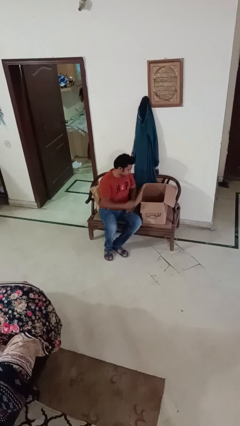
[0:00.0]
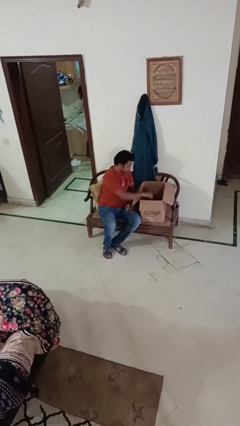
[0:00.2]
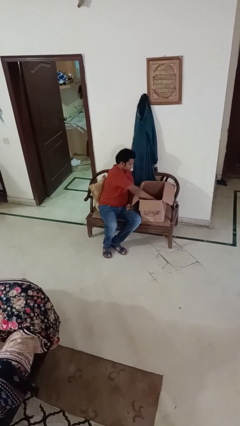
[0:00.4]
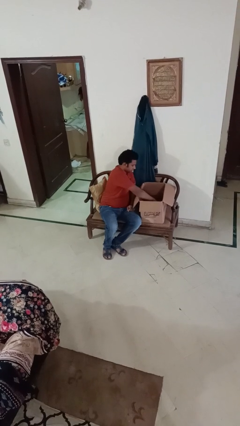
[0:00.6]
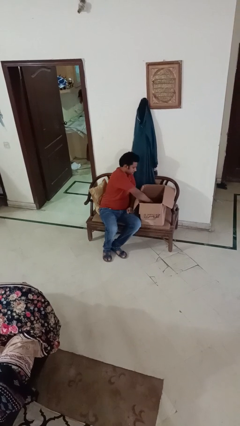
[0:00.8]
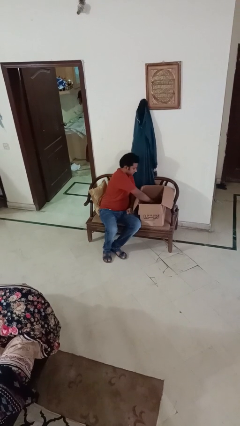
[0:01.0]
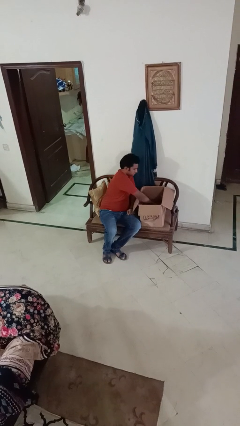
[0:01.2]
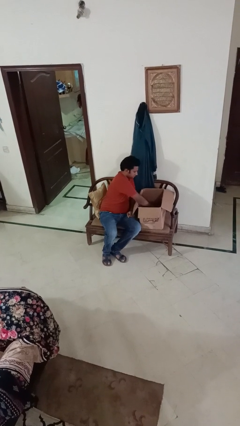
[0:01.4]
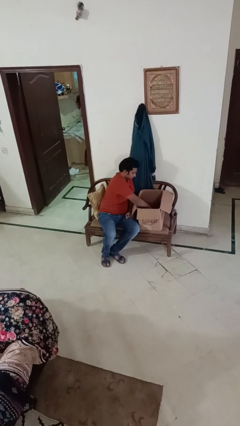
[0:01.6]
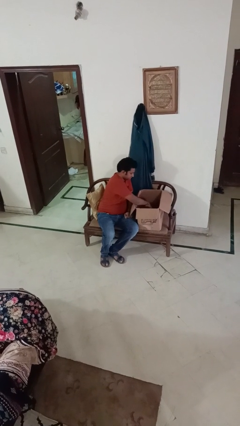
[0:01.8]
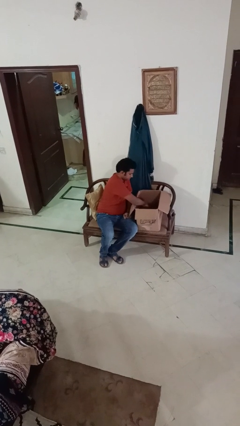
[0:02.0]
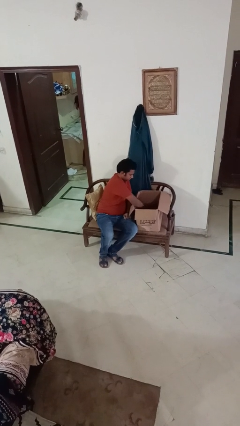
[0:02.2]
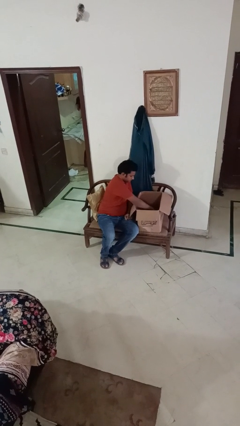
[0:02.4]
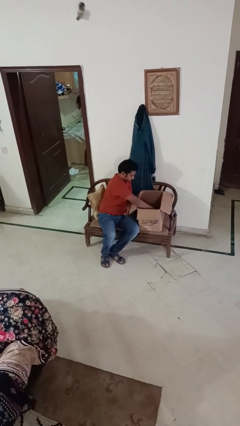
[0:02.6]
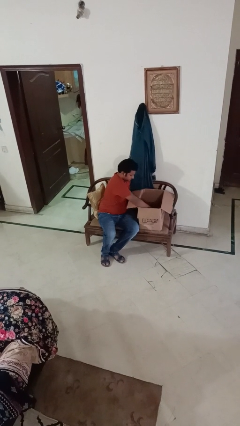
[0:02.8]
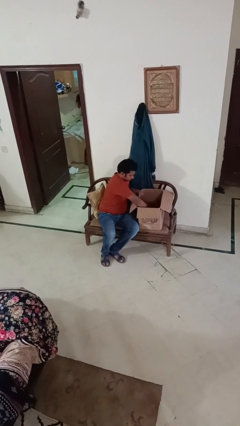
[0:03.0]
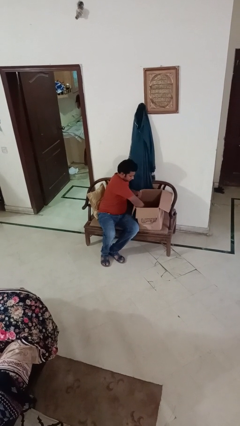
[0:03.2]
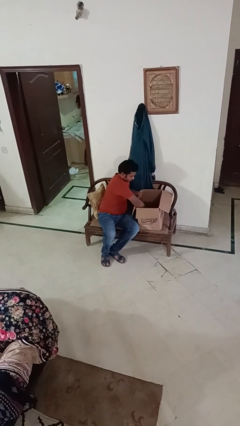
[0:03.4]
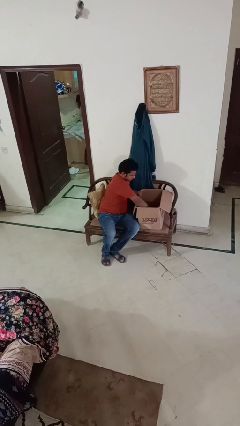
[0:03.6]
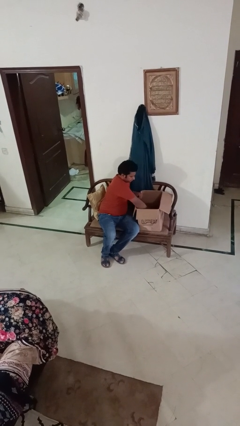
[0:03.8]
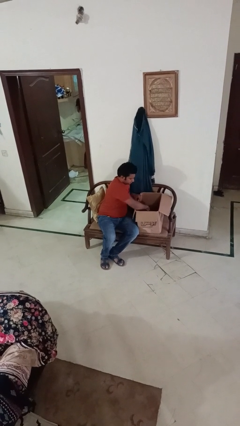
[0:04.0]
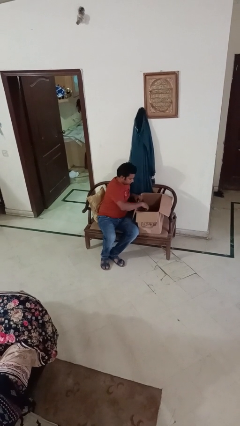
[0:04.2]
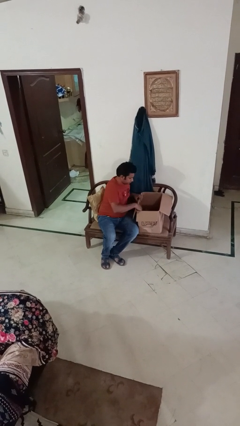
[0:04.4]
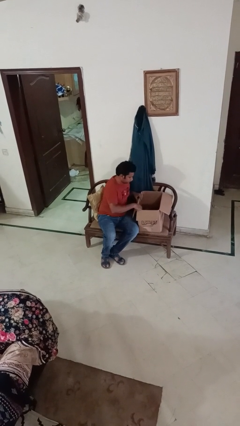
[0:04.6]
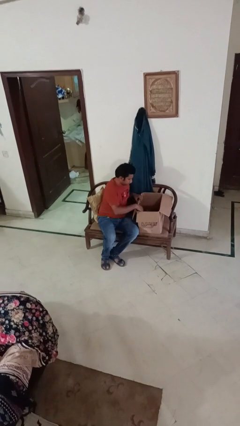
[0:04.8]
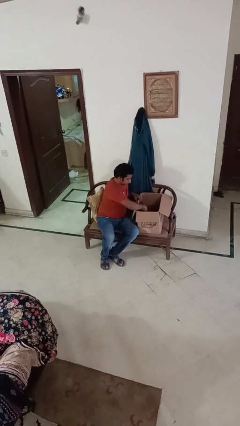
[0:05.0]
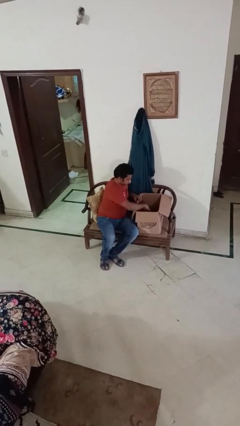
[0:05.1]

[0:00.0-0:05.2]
person searches in box

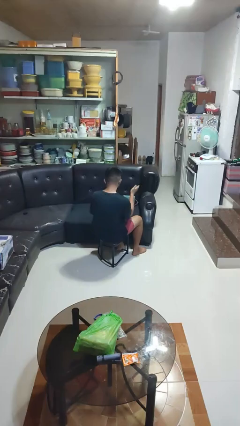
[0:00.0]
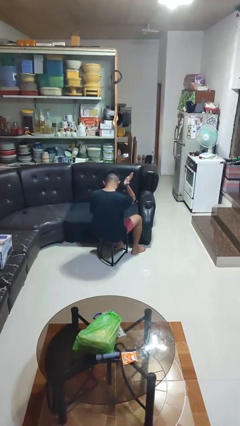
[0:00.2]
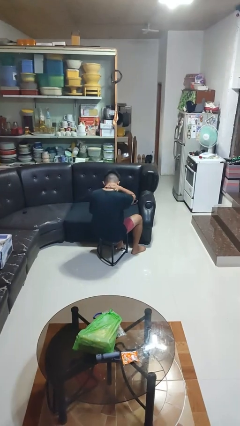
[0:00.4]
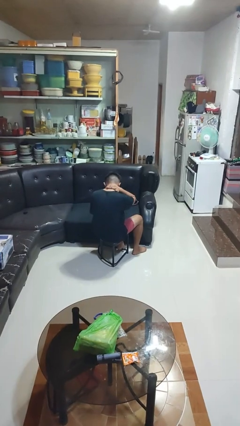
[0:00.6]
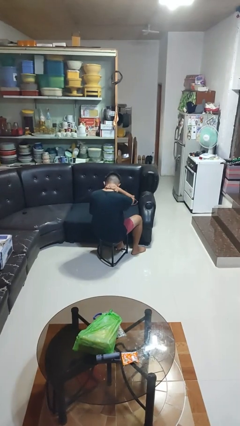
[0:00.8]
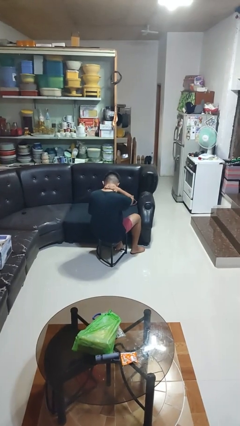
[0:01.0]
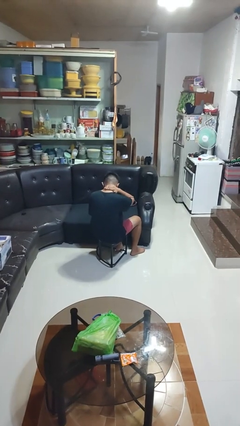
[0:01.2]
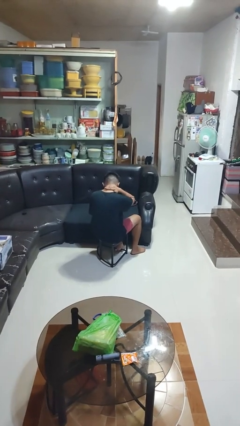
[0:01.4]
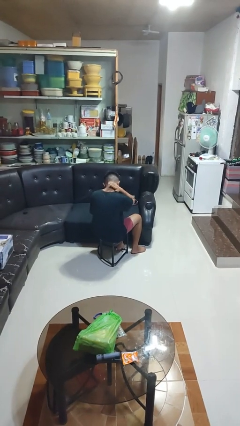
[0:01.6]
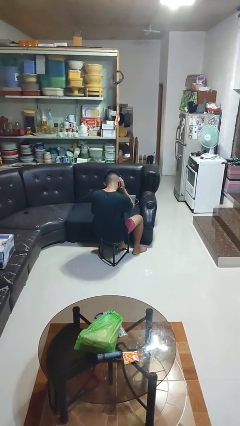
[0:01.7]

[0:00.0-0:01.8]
person swats bug

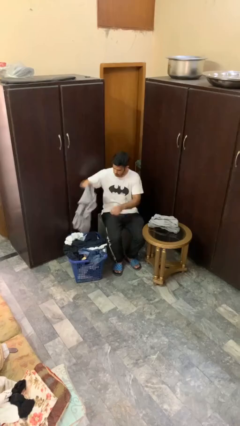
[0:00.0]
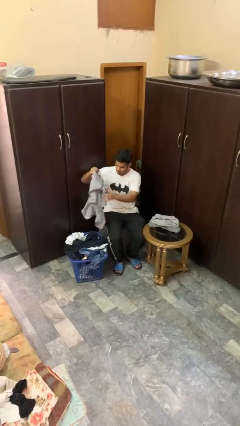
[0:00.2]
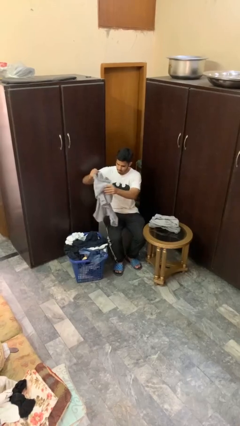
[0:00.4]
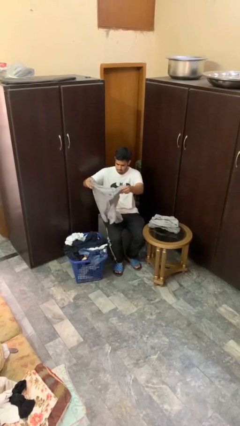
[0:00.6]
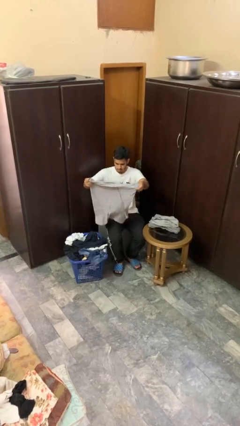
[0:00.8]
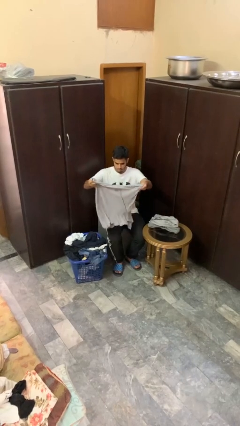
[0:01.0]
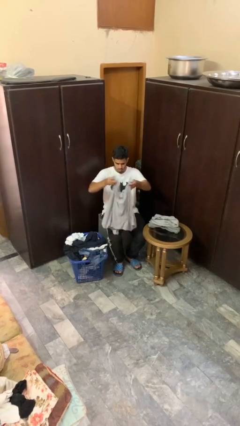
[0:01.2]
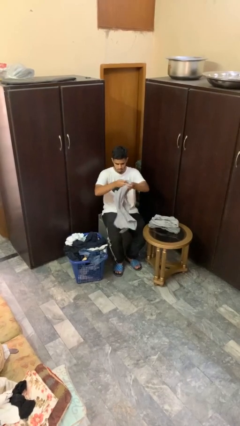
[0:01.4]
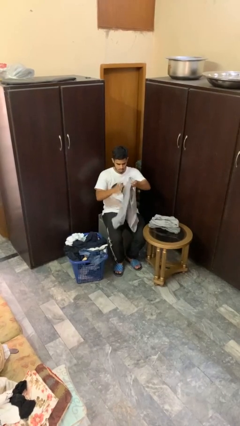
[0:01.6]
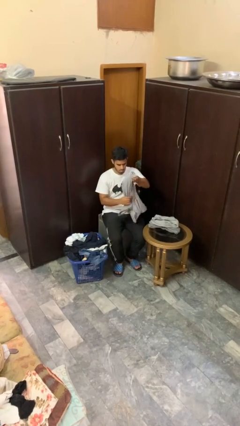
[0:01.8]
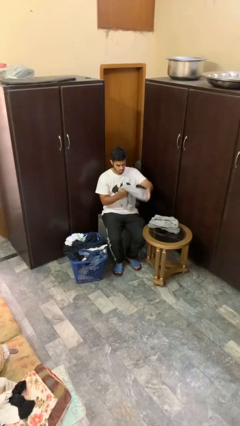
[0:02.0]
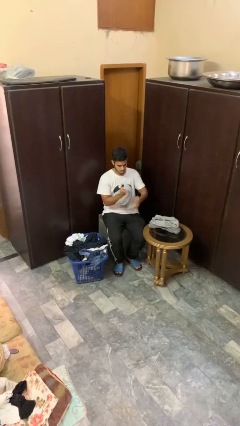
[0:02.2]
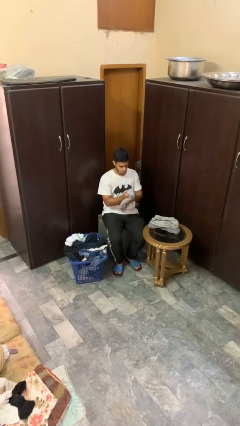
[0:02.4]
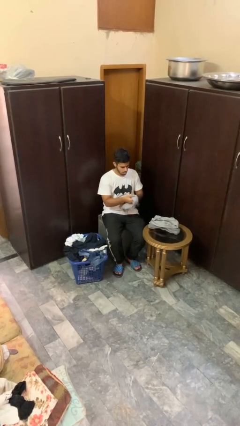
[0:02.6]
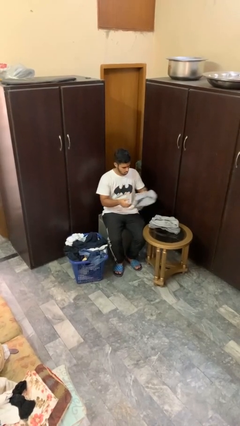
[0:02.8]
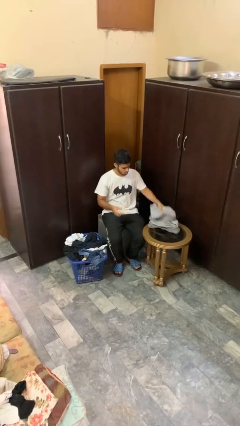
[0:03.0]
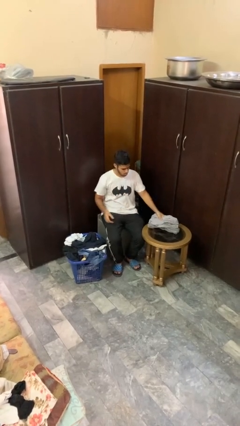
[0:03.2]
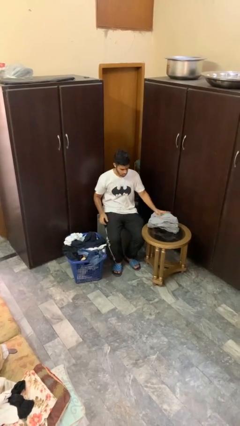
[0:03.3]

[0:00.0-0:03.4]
person folds shirt

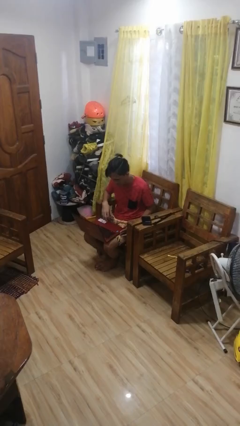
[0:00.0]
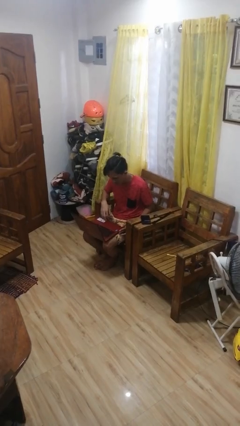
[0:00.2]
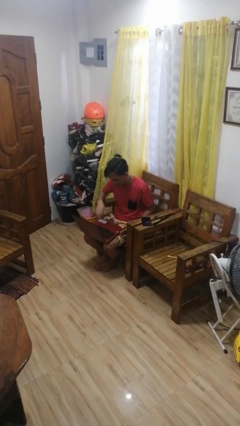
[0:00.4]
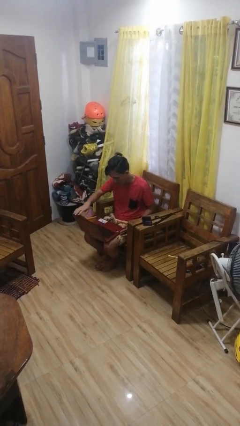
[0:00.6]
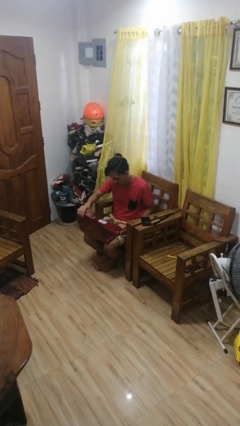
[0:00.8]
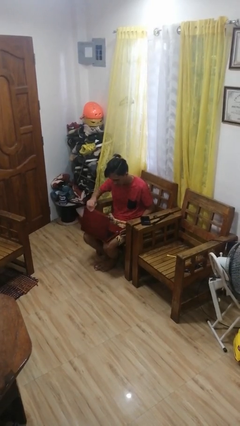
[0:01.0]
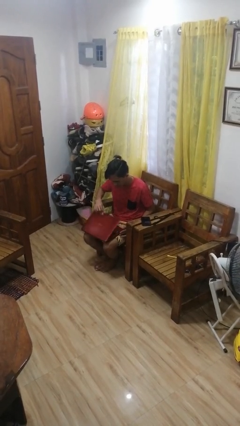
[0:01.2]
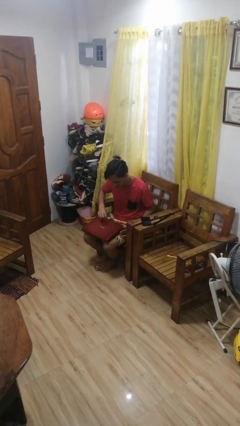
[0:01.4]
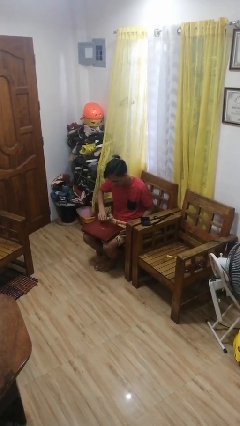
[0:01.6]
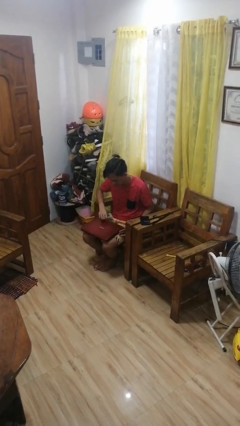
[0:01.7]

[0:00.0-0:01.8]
person closes laptop

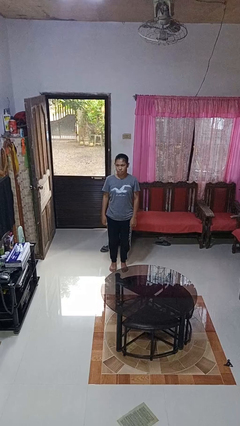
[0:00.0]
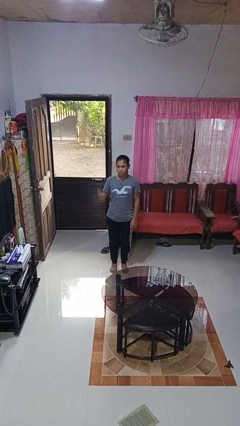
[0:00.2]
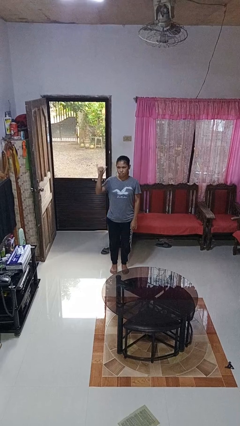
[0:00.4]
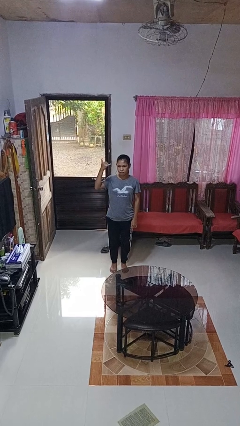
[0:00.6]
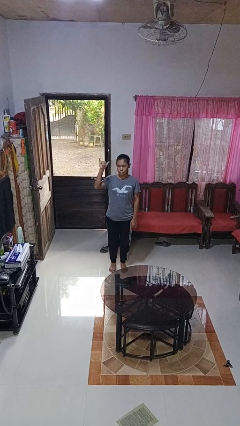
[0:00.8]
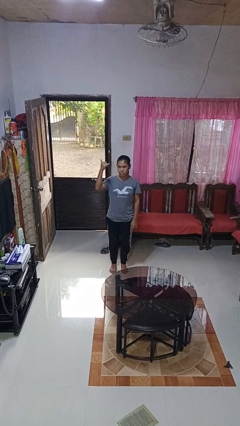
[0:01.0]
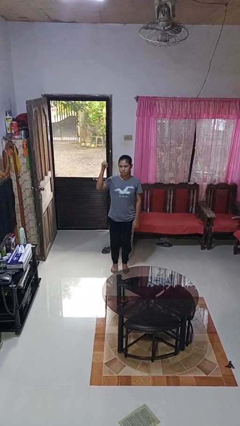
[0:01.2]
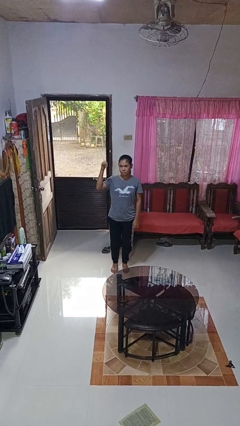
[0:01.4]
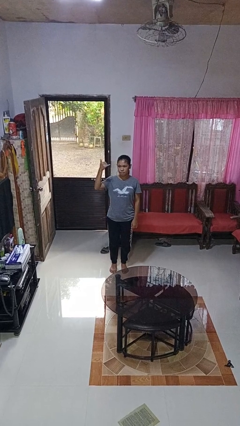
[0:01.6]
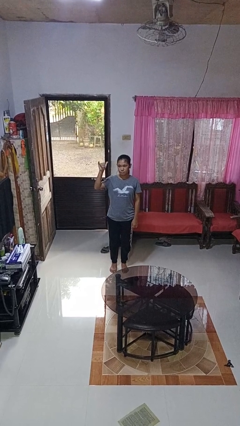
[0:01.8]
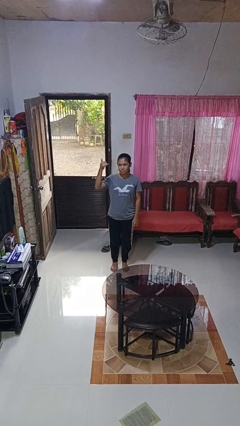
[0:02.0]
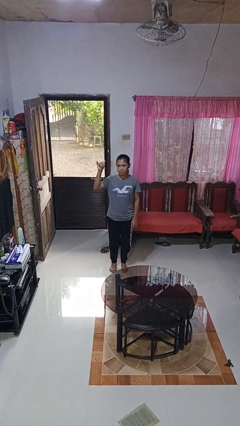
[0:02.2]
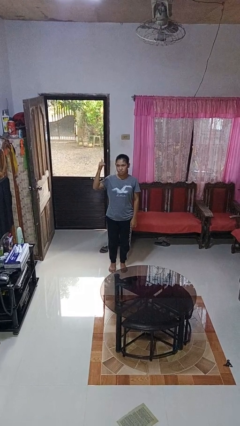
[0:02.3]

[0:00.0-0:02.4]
person gestures hang loose

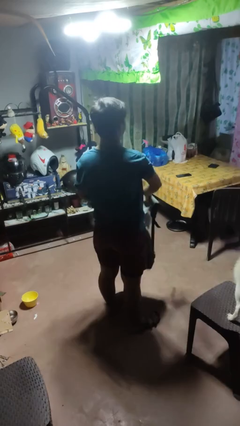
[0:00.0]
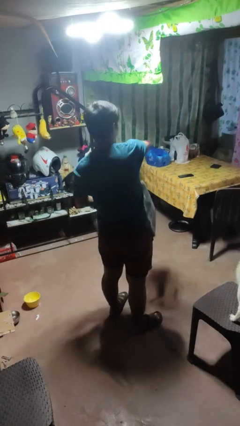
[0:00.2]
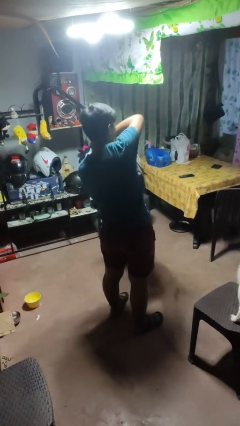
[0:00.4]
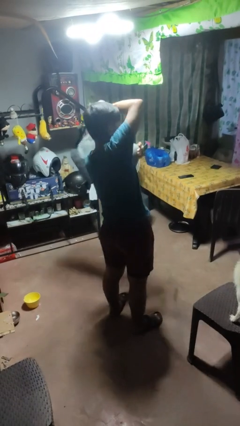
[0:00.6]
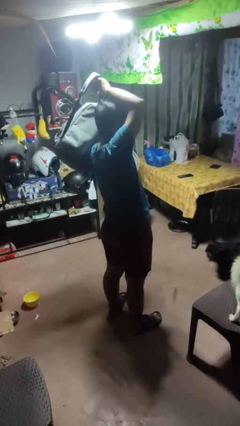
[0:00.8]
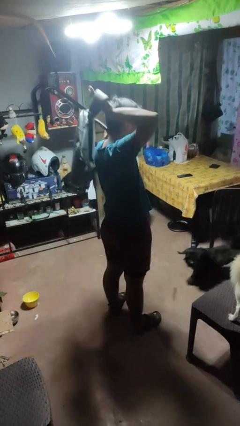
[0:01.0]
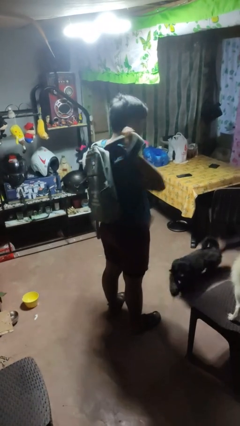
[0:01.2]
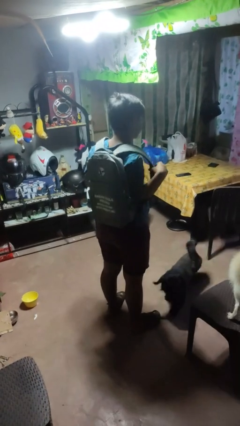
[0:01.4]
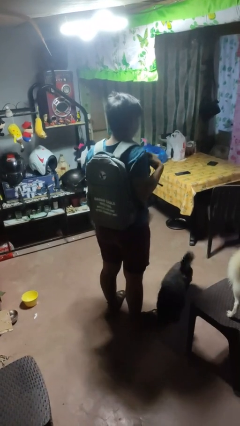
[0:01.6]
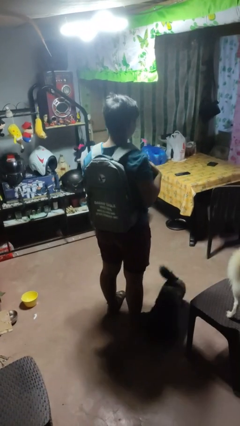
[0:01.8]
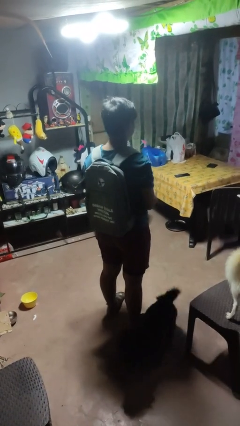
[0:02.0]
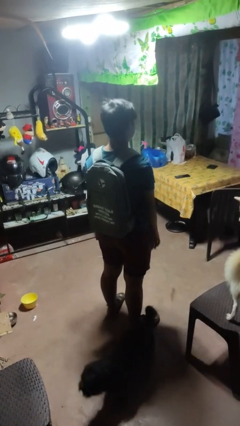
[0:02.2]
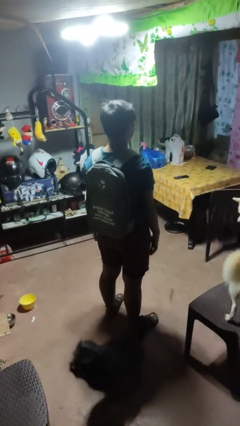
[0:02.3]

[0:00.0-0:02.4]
person puts on backpack

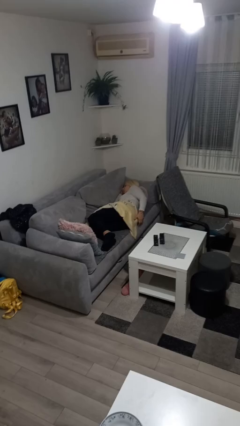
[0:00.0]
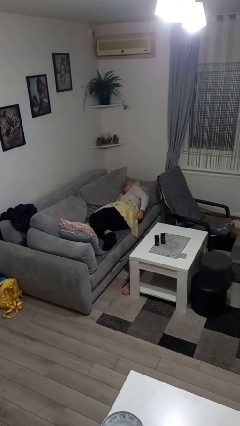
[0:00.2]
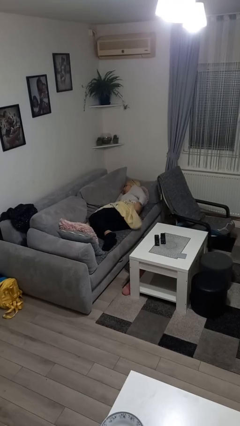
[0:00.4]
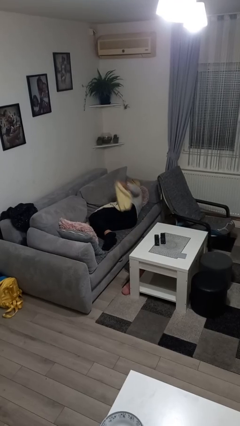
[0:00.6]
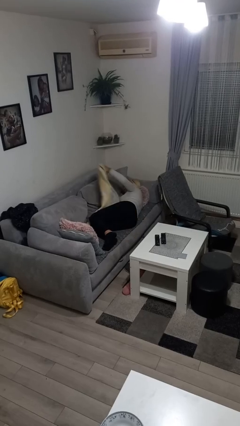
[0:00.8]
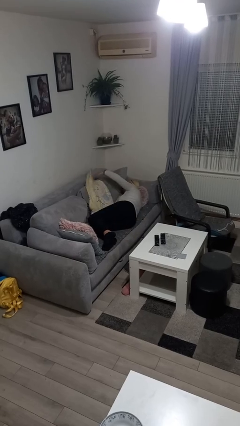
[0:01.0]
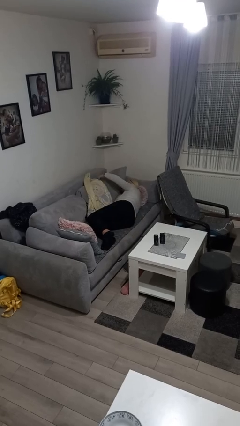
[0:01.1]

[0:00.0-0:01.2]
person uncovers with blanket
